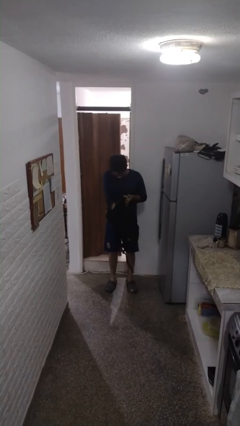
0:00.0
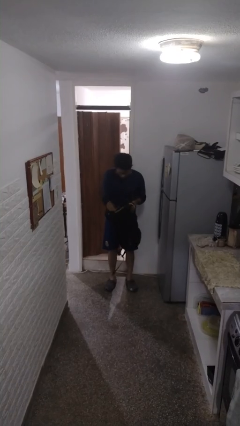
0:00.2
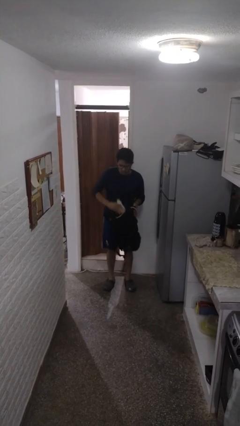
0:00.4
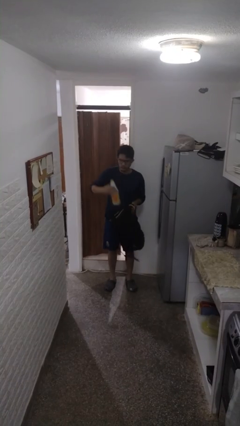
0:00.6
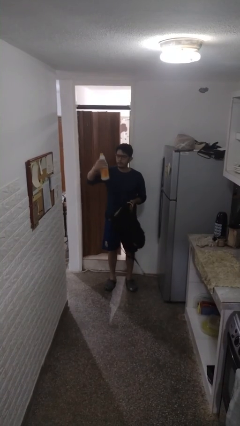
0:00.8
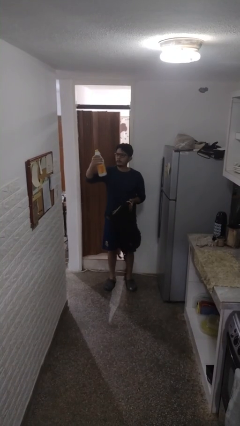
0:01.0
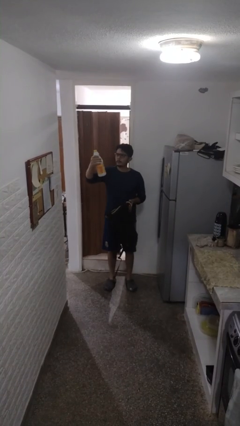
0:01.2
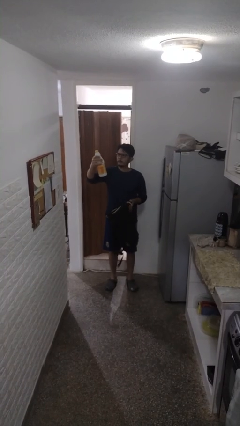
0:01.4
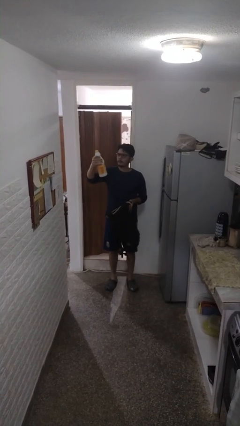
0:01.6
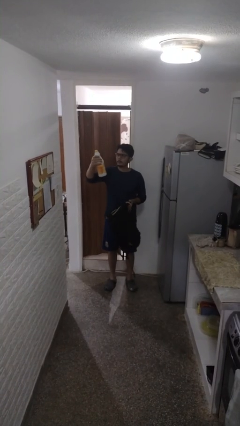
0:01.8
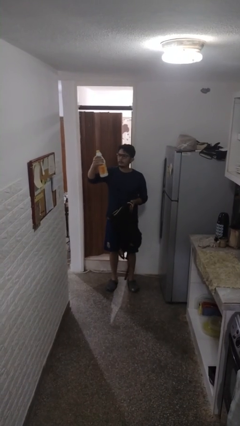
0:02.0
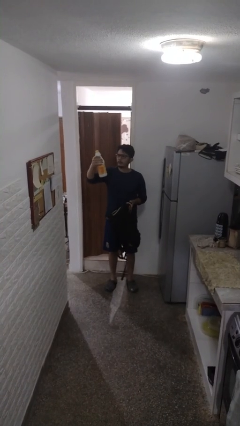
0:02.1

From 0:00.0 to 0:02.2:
person takes object from backpack

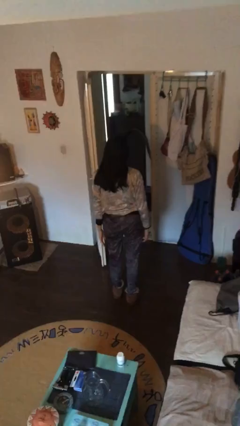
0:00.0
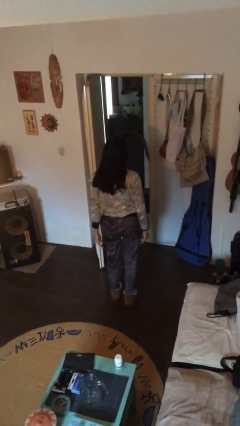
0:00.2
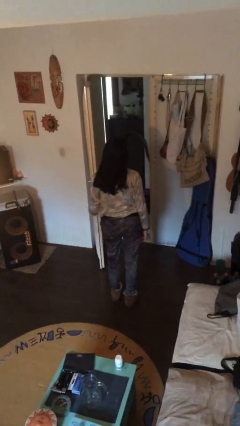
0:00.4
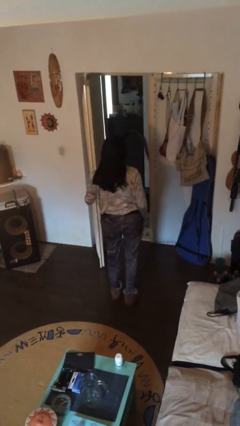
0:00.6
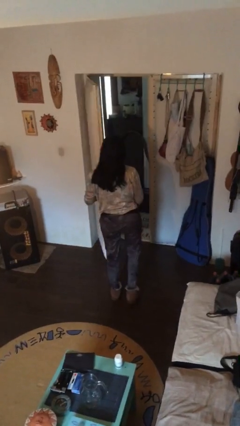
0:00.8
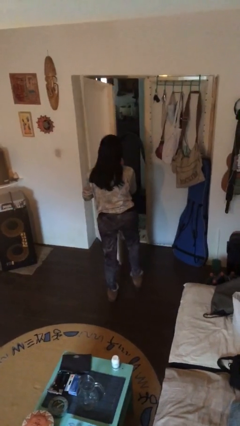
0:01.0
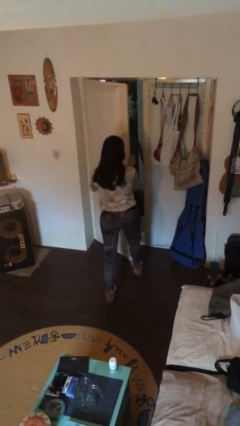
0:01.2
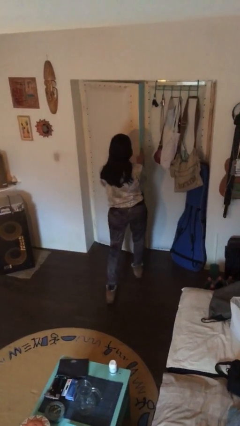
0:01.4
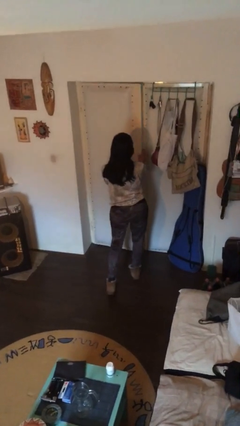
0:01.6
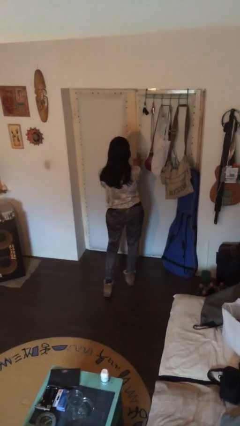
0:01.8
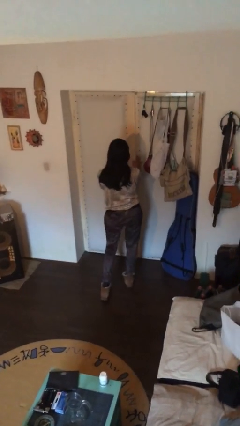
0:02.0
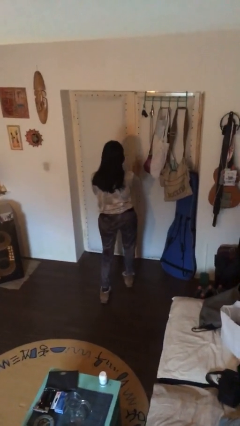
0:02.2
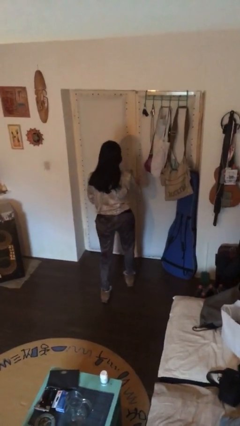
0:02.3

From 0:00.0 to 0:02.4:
person closes facility door

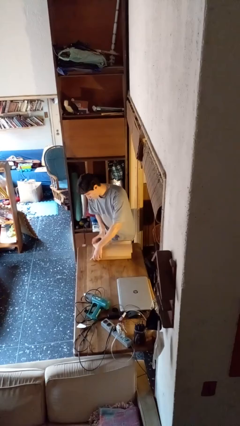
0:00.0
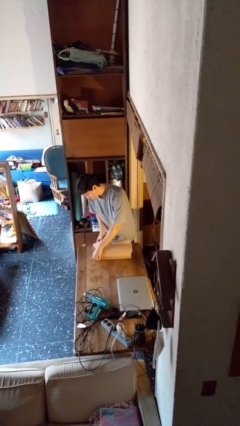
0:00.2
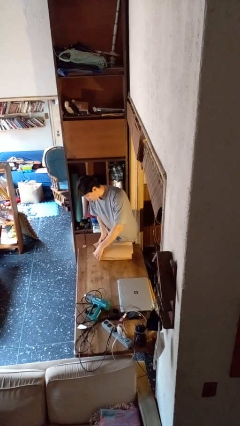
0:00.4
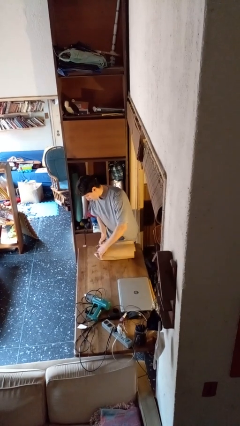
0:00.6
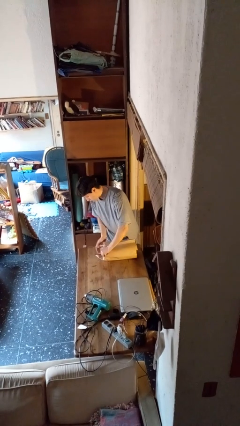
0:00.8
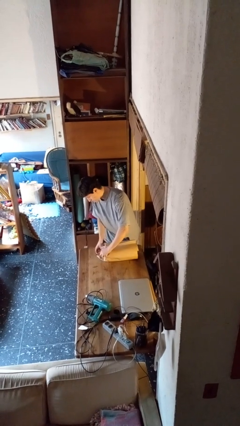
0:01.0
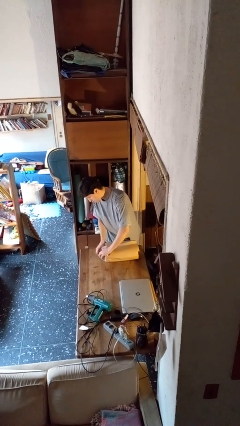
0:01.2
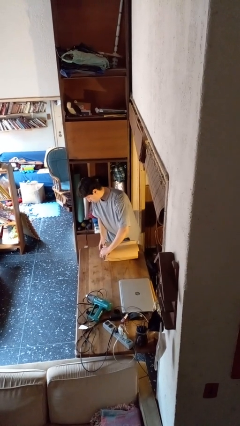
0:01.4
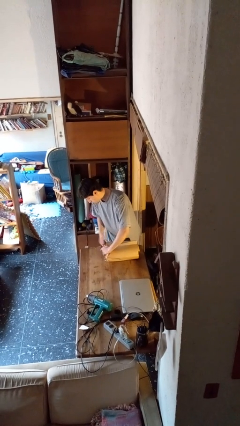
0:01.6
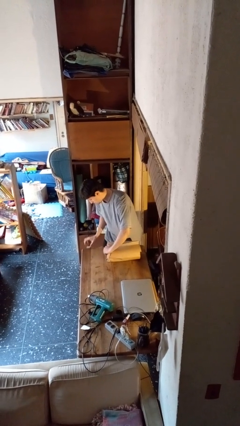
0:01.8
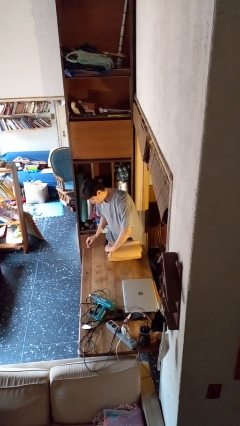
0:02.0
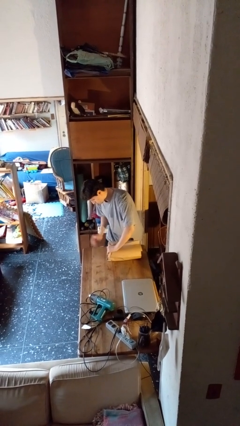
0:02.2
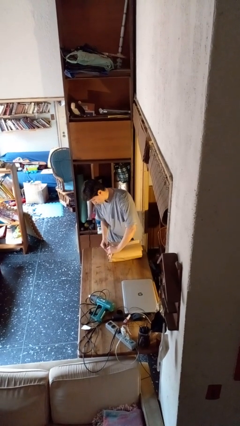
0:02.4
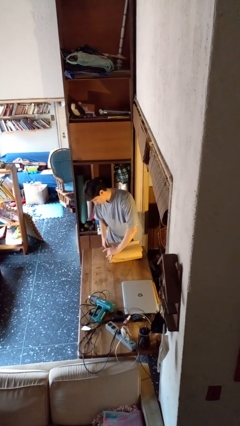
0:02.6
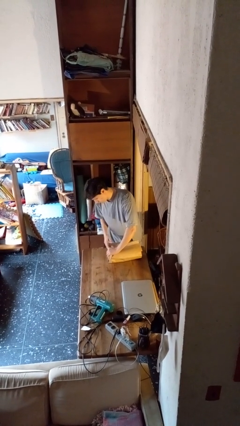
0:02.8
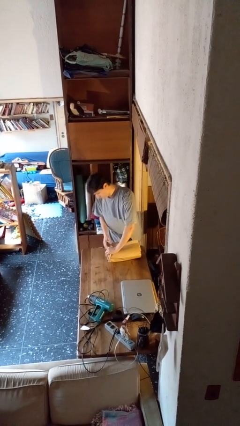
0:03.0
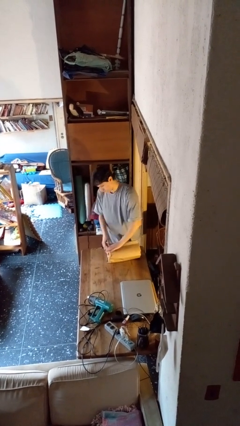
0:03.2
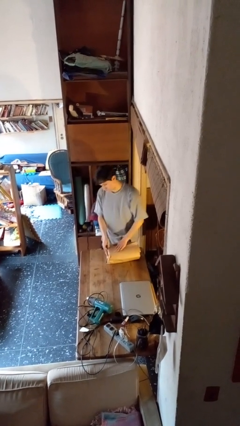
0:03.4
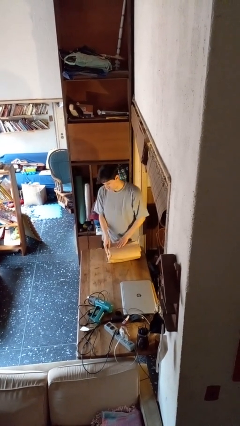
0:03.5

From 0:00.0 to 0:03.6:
person wraps box

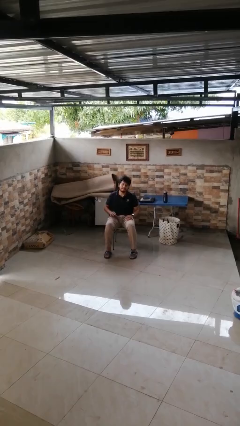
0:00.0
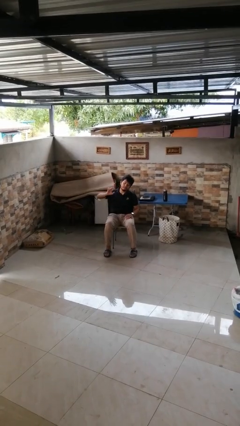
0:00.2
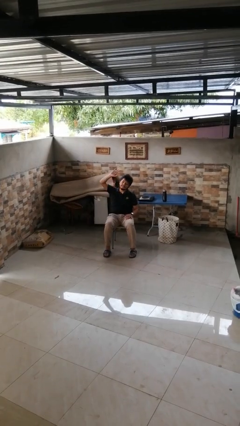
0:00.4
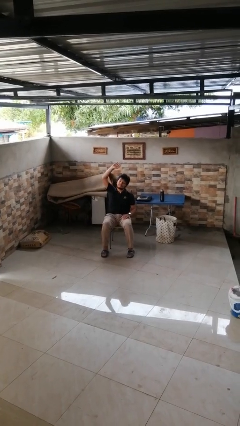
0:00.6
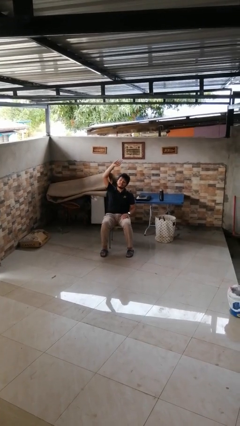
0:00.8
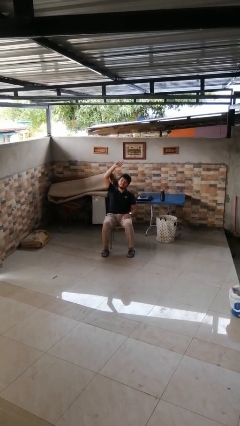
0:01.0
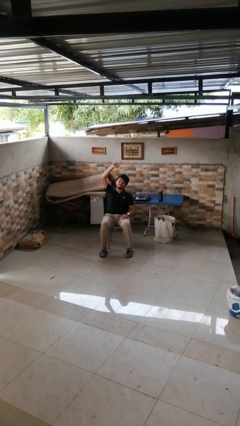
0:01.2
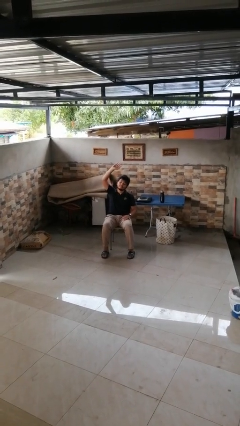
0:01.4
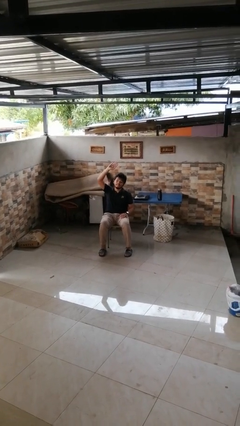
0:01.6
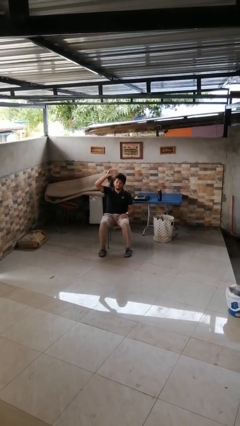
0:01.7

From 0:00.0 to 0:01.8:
person gestures raise hand

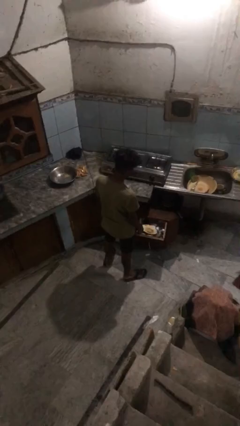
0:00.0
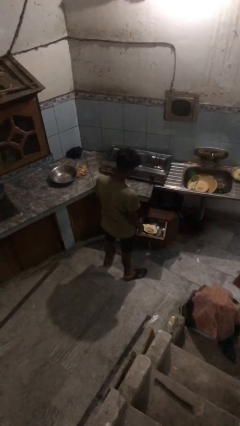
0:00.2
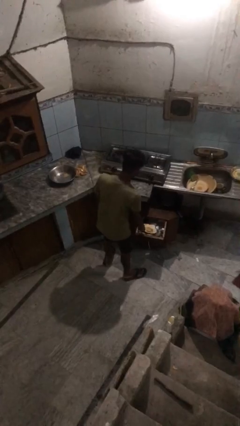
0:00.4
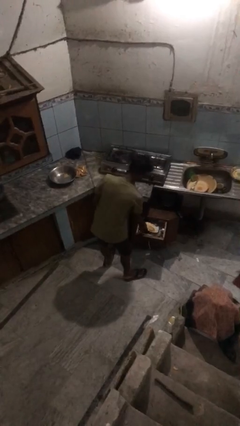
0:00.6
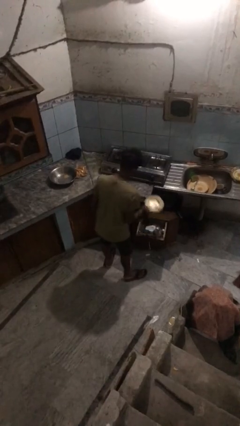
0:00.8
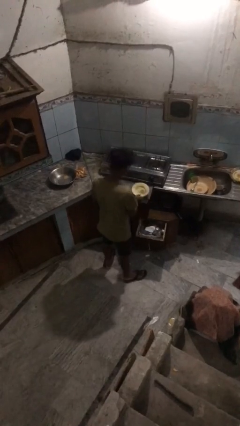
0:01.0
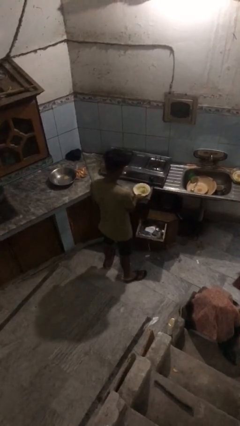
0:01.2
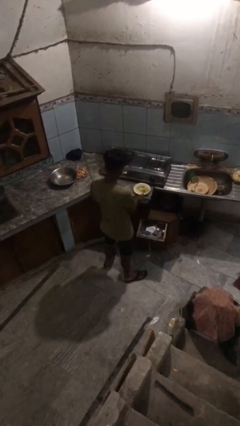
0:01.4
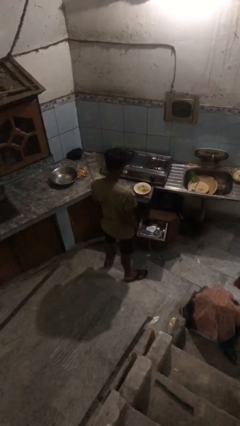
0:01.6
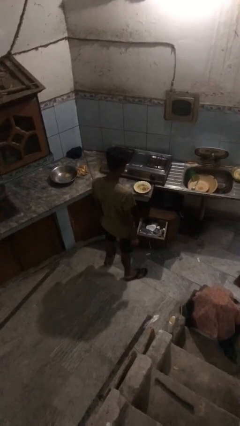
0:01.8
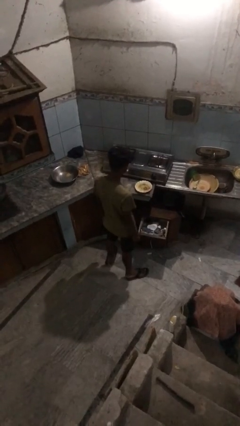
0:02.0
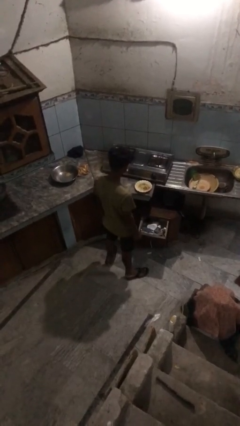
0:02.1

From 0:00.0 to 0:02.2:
person takes object from kitchen drawer

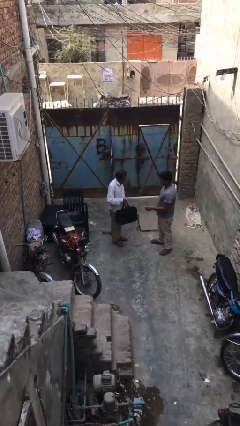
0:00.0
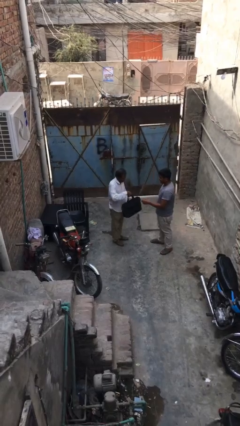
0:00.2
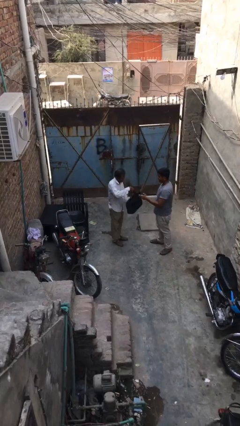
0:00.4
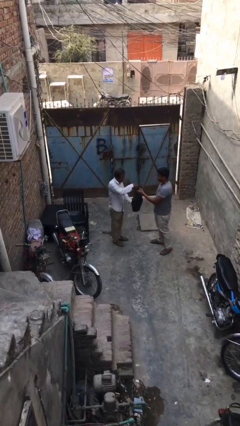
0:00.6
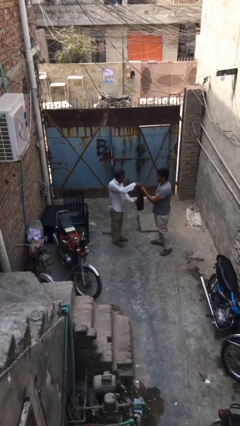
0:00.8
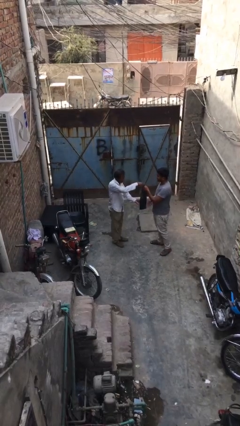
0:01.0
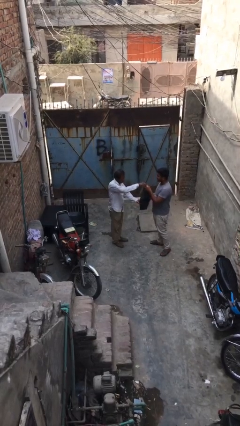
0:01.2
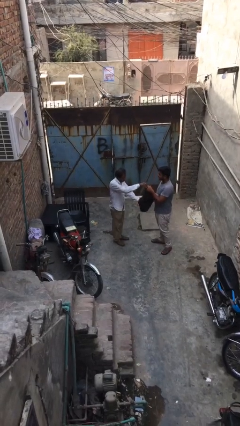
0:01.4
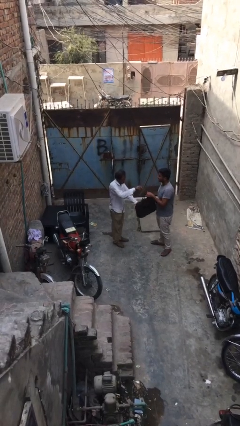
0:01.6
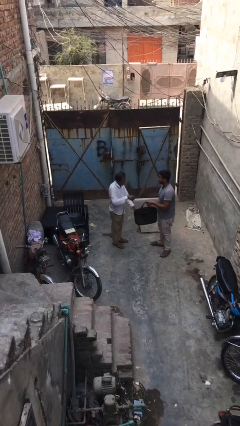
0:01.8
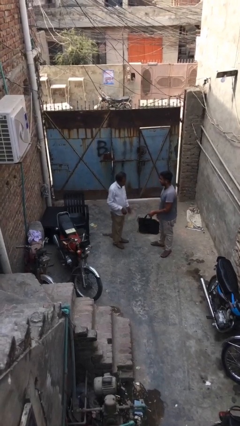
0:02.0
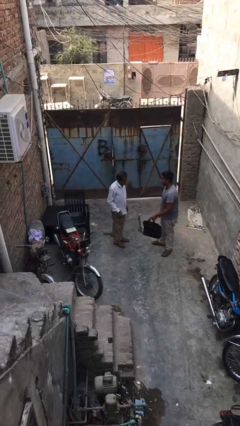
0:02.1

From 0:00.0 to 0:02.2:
person transfers object to person

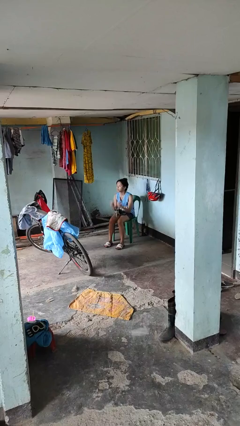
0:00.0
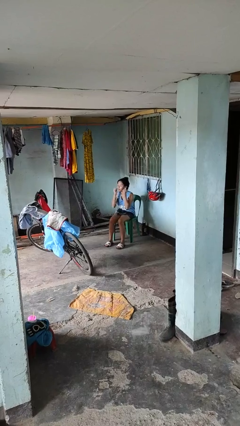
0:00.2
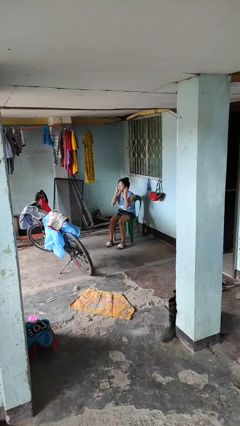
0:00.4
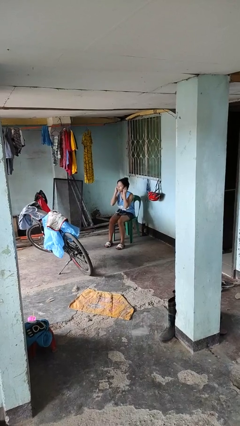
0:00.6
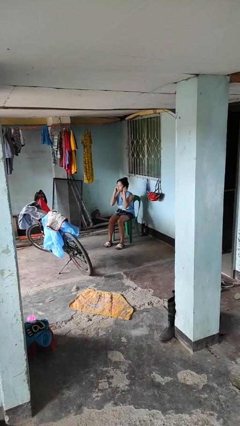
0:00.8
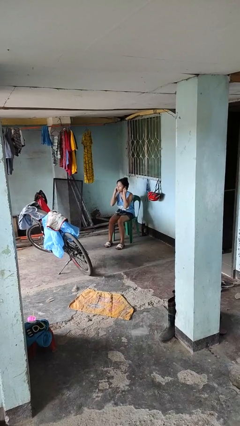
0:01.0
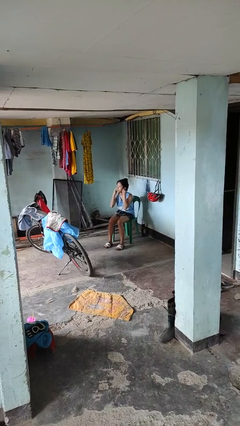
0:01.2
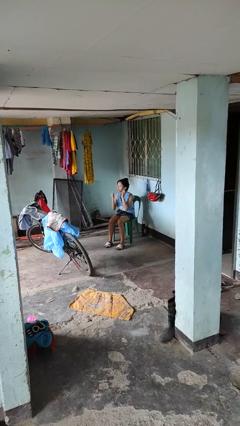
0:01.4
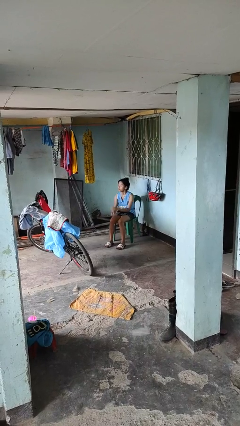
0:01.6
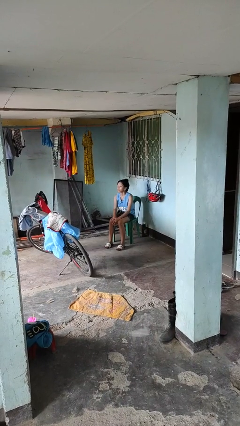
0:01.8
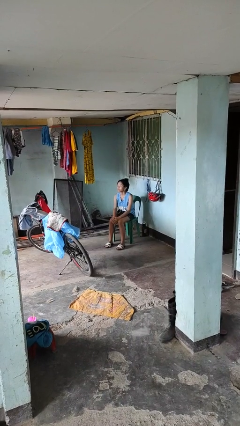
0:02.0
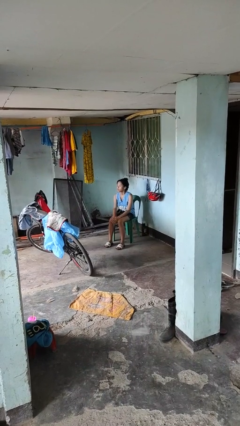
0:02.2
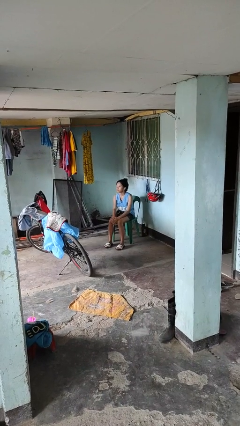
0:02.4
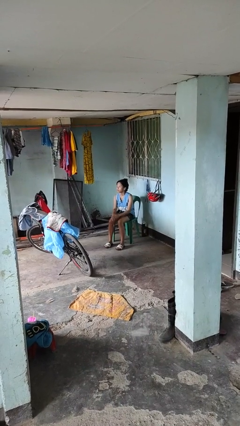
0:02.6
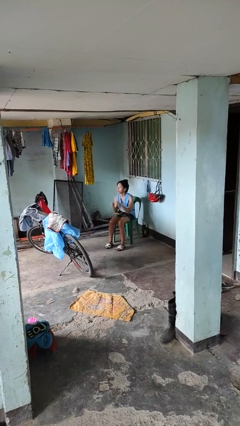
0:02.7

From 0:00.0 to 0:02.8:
person puts on headphones
